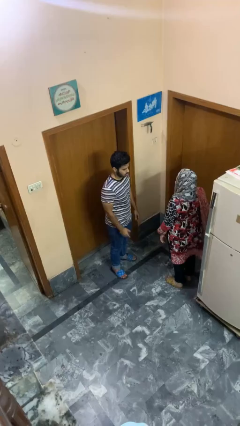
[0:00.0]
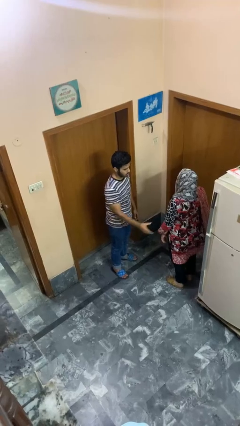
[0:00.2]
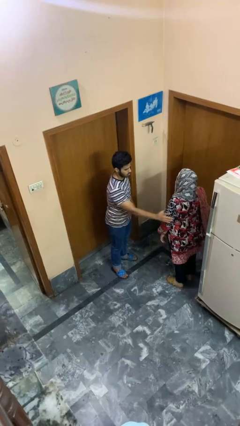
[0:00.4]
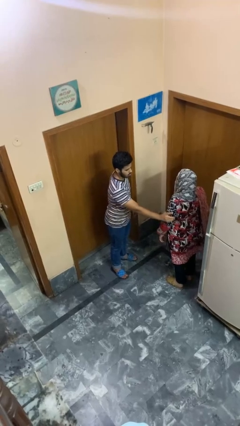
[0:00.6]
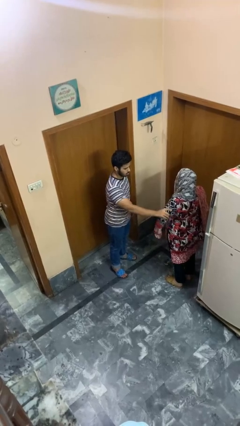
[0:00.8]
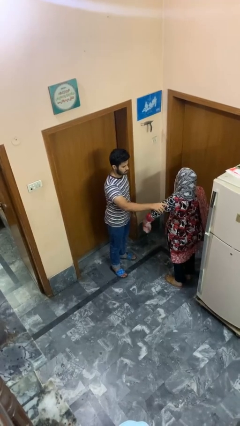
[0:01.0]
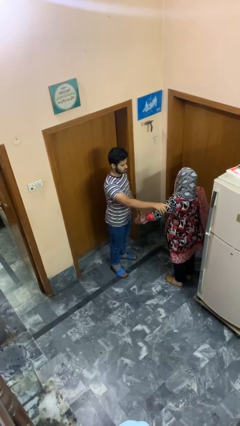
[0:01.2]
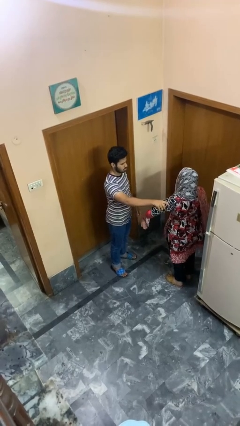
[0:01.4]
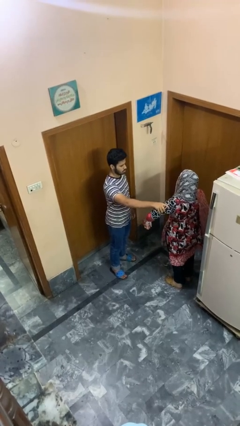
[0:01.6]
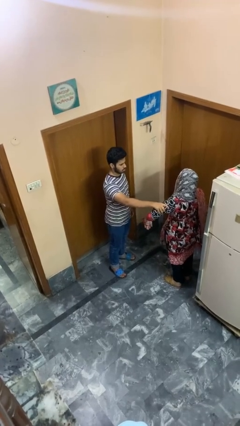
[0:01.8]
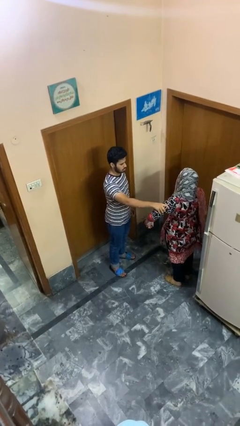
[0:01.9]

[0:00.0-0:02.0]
person grabs person by bicep

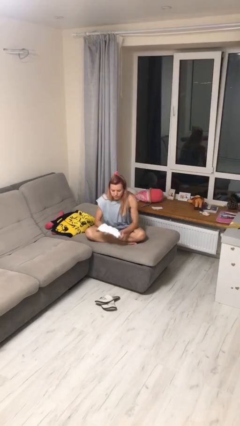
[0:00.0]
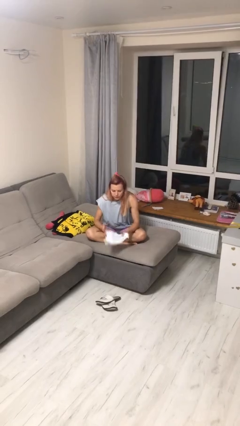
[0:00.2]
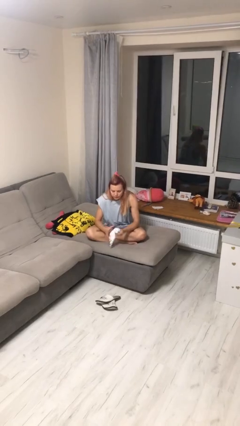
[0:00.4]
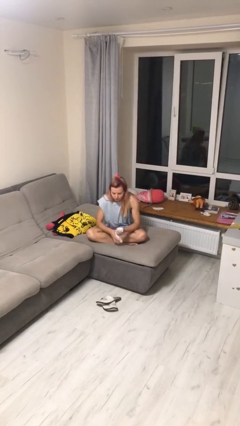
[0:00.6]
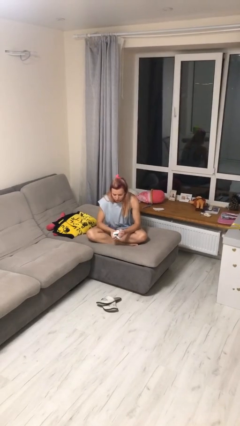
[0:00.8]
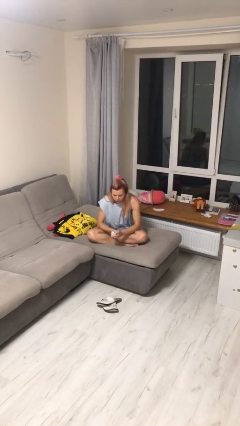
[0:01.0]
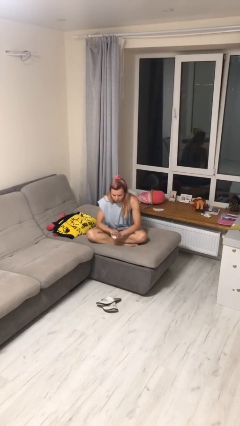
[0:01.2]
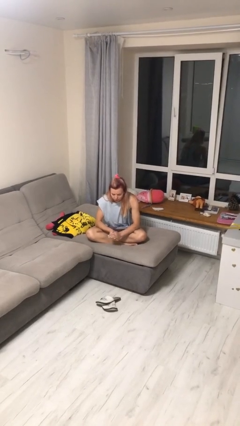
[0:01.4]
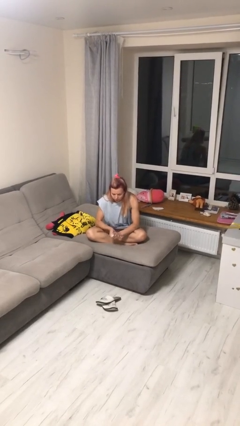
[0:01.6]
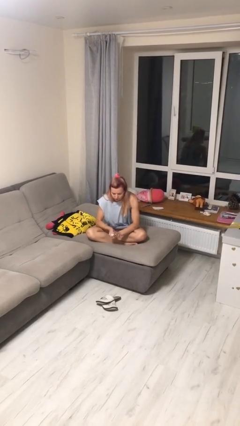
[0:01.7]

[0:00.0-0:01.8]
person crumples paper

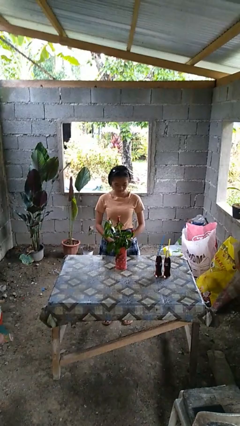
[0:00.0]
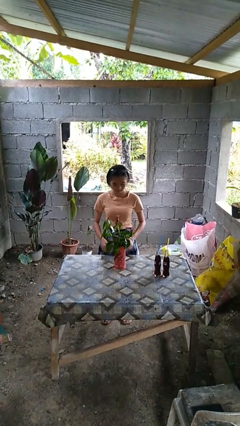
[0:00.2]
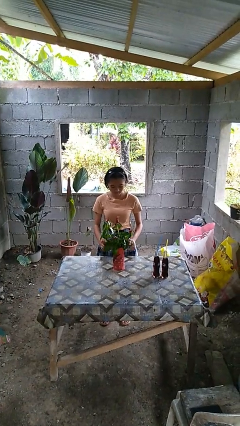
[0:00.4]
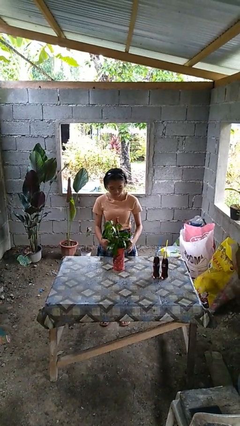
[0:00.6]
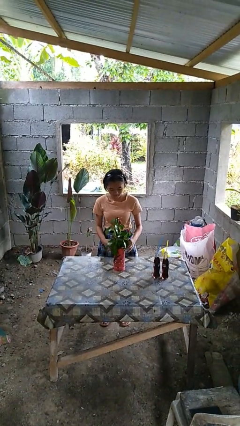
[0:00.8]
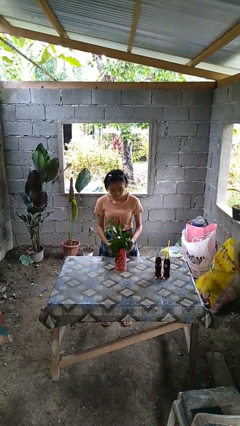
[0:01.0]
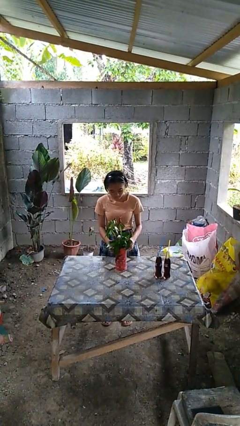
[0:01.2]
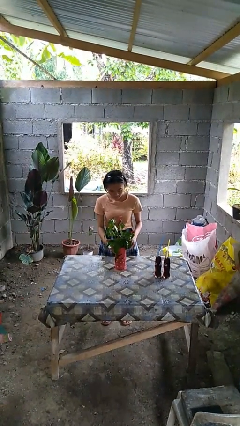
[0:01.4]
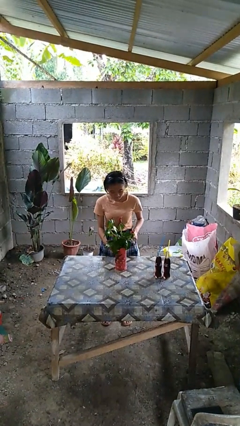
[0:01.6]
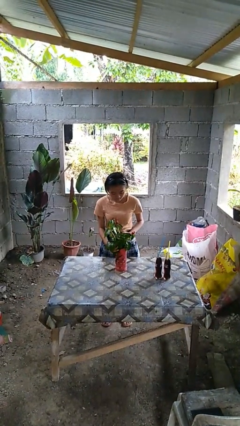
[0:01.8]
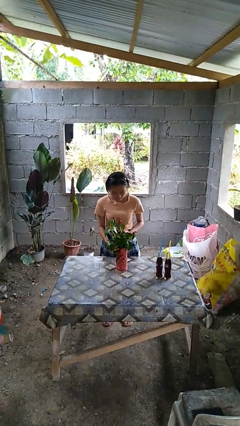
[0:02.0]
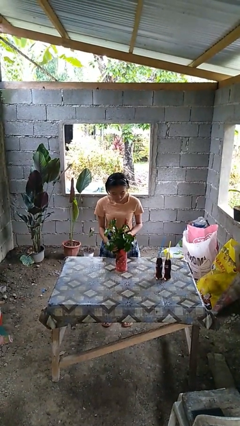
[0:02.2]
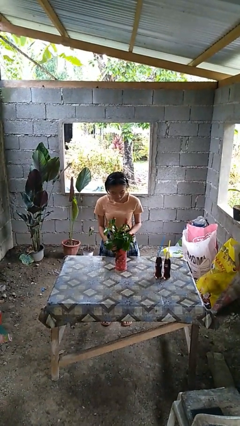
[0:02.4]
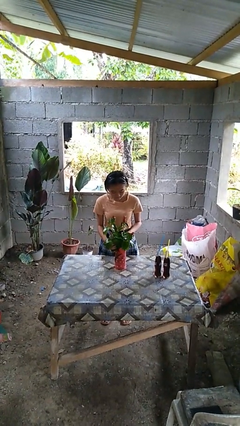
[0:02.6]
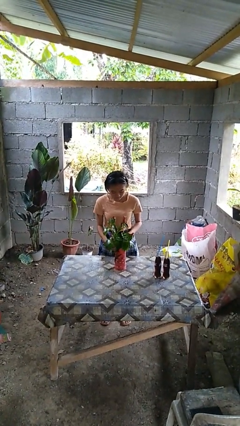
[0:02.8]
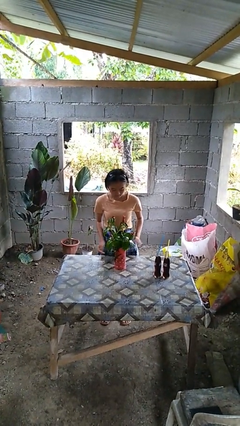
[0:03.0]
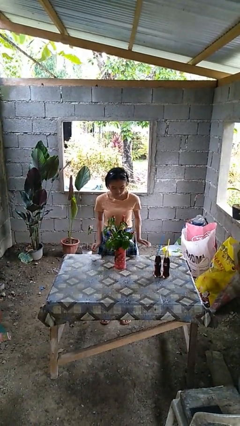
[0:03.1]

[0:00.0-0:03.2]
person arranges flowers in vase

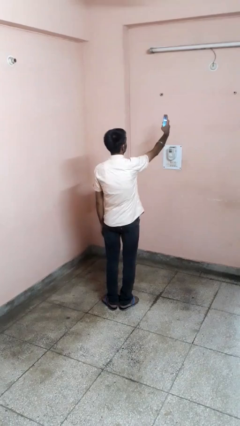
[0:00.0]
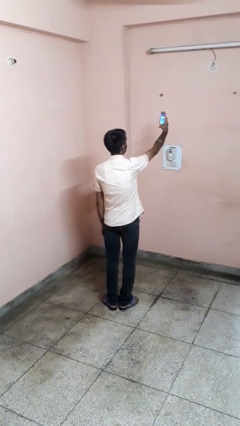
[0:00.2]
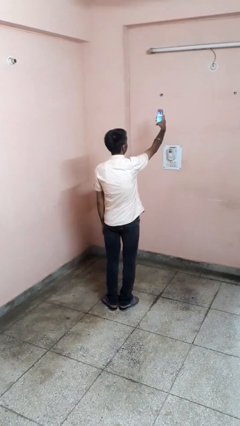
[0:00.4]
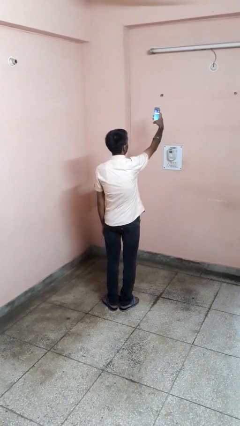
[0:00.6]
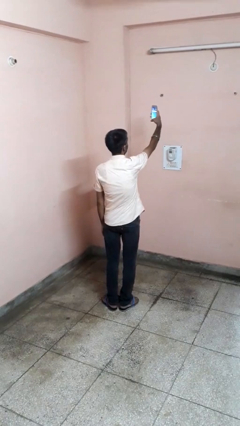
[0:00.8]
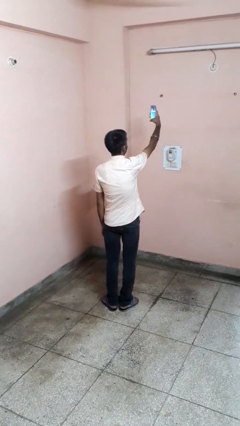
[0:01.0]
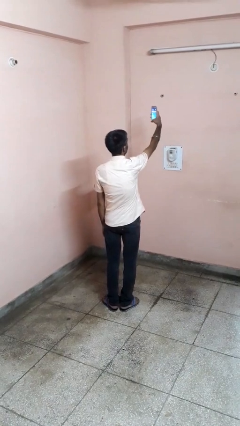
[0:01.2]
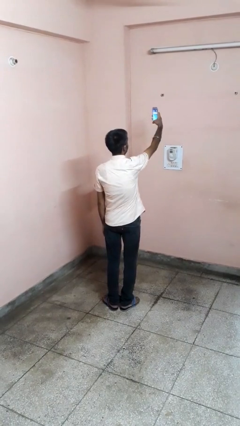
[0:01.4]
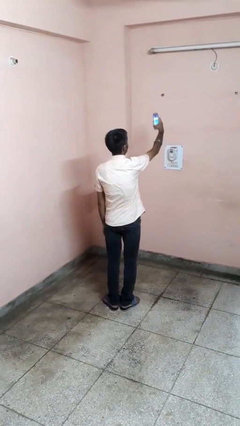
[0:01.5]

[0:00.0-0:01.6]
person takes selfie

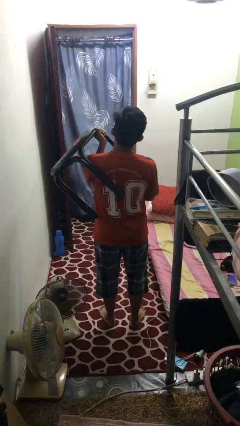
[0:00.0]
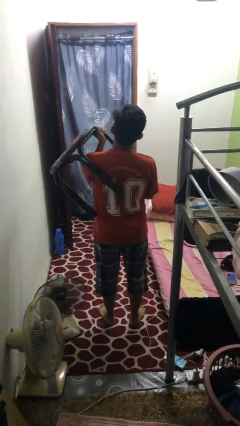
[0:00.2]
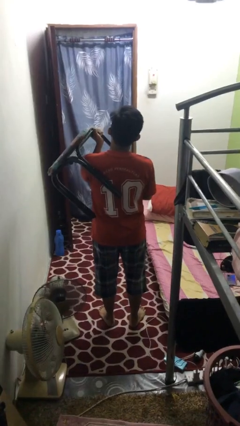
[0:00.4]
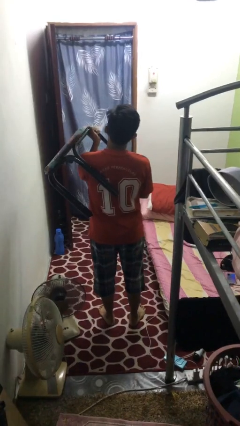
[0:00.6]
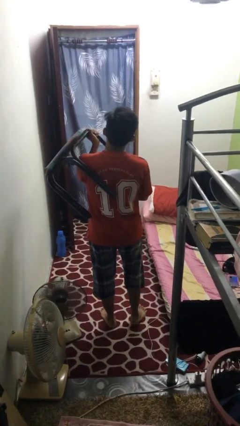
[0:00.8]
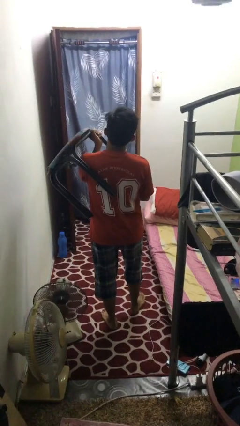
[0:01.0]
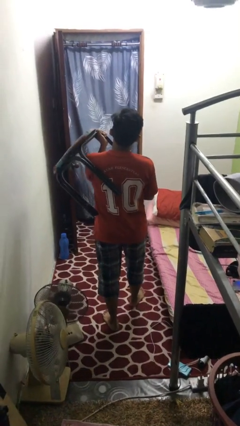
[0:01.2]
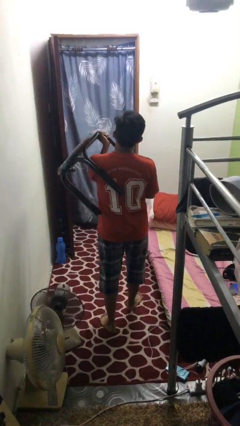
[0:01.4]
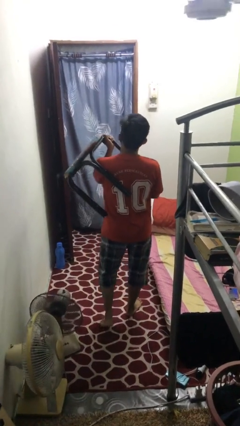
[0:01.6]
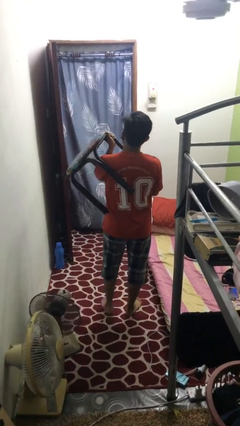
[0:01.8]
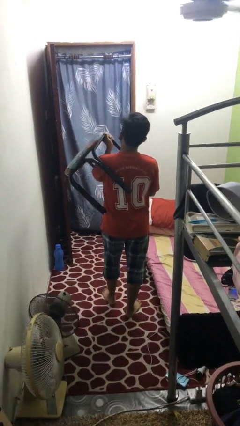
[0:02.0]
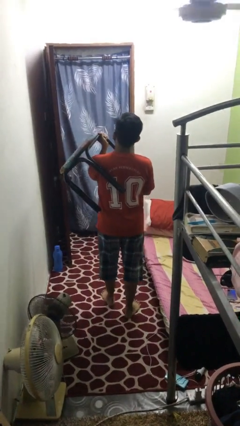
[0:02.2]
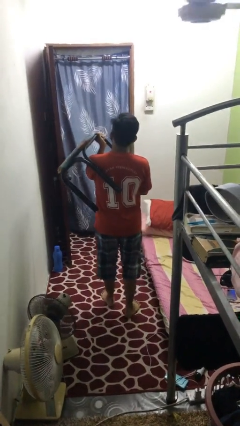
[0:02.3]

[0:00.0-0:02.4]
person carries furniture

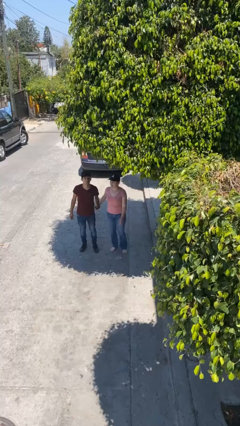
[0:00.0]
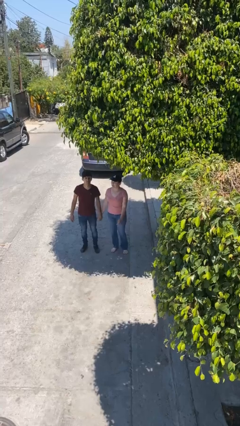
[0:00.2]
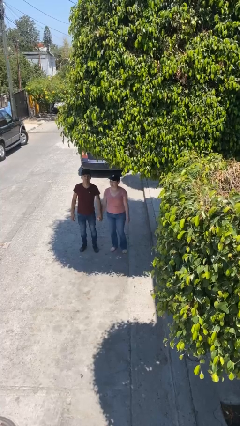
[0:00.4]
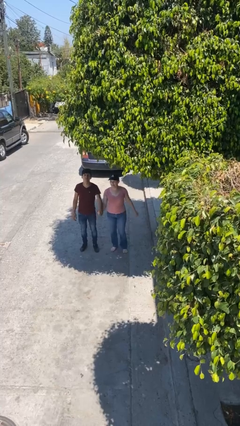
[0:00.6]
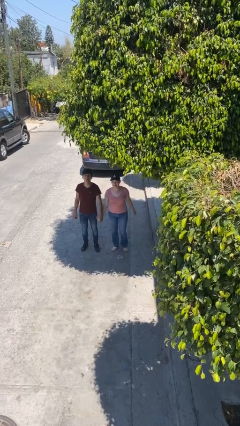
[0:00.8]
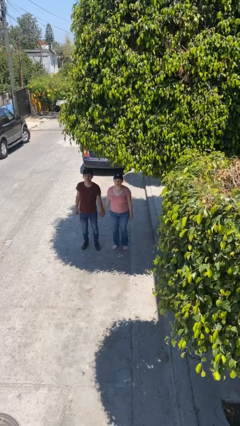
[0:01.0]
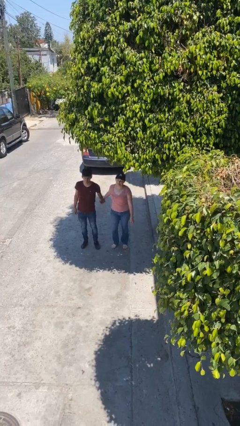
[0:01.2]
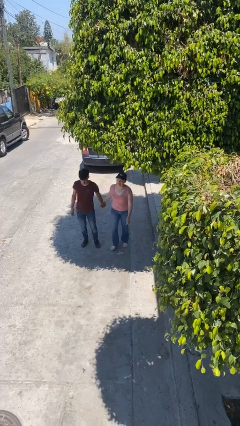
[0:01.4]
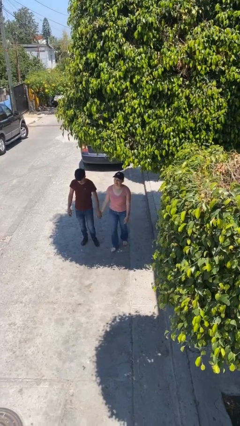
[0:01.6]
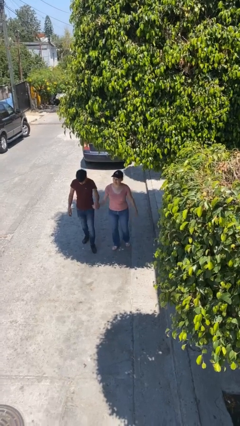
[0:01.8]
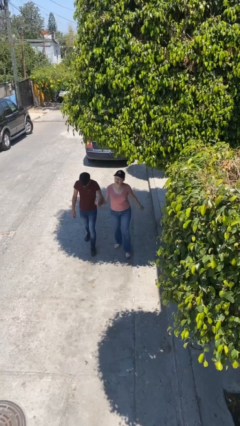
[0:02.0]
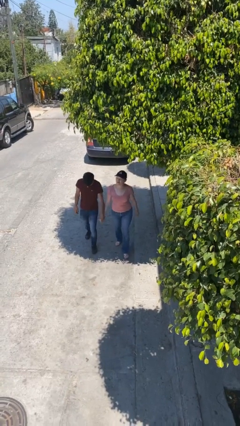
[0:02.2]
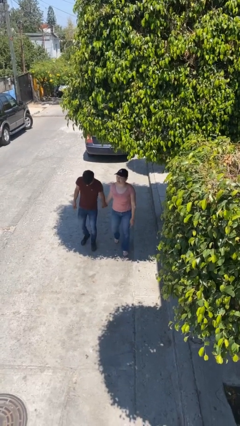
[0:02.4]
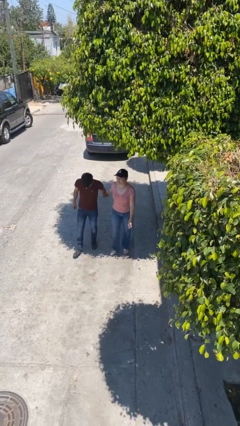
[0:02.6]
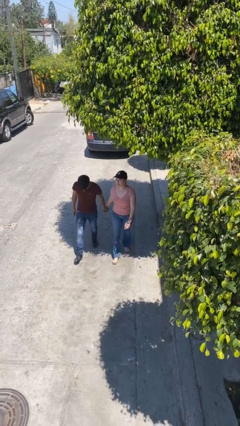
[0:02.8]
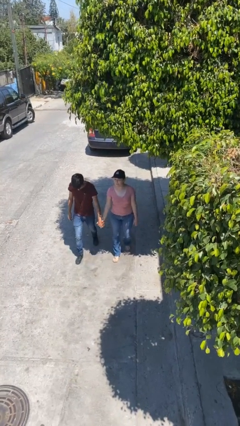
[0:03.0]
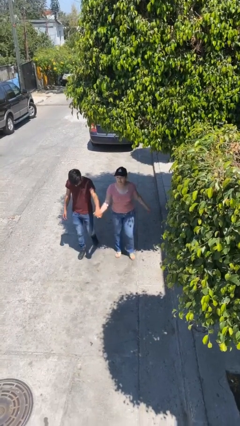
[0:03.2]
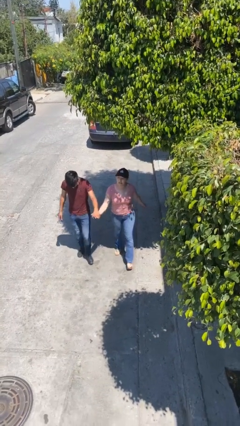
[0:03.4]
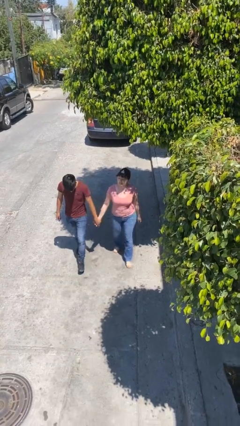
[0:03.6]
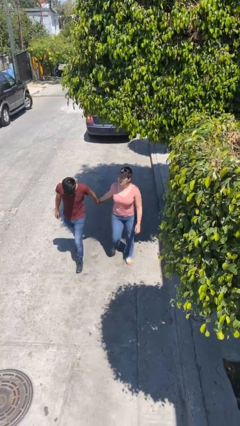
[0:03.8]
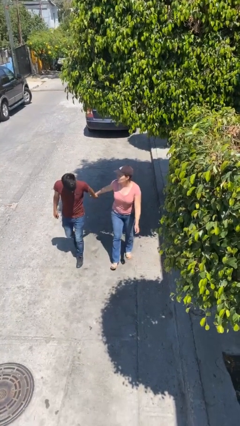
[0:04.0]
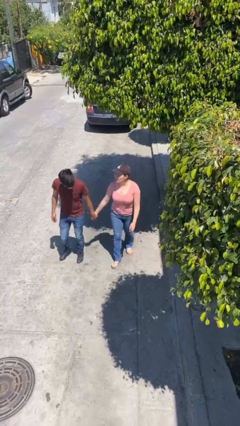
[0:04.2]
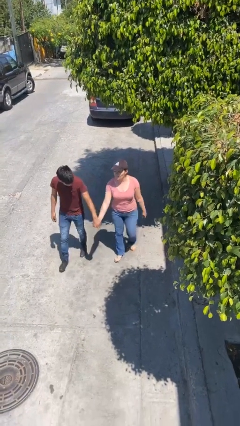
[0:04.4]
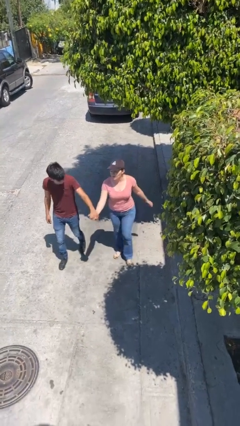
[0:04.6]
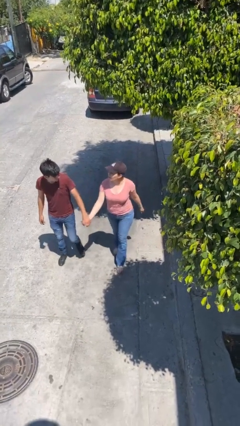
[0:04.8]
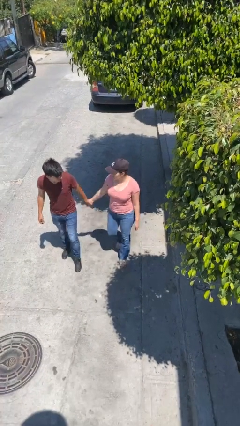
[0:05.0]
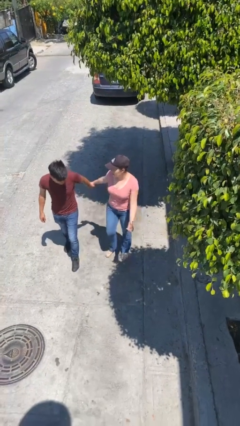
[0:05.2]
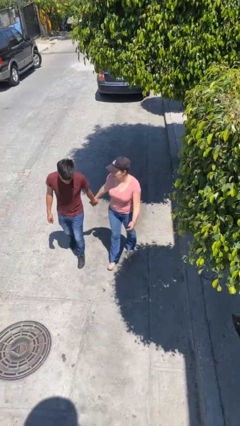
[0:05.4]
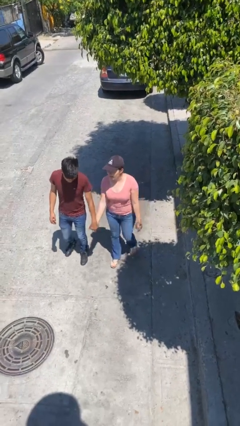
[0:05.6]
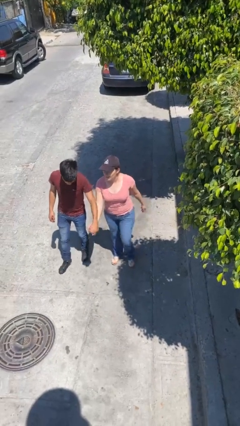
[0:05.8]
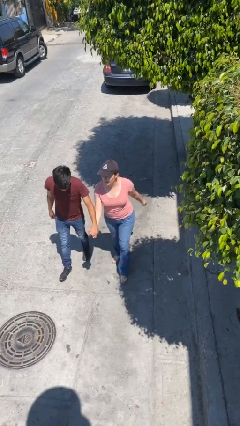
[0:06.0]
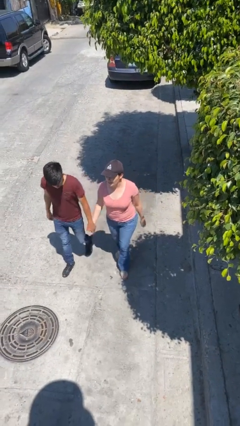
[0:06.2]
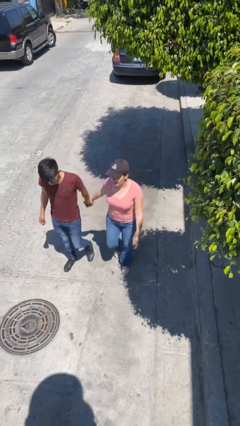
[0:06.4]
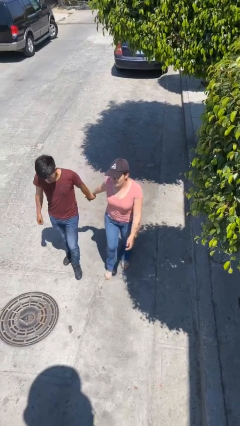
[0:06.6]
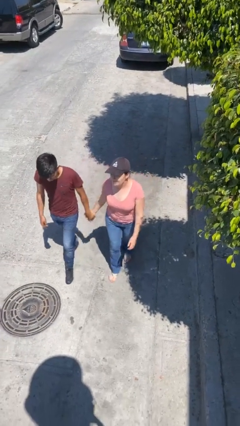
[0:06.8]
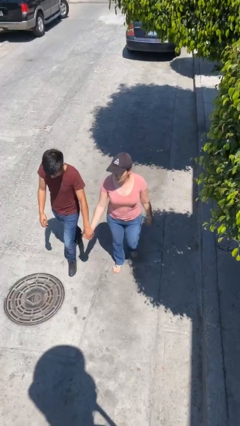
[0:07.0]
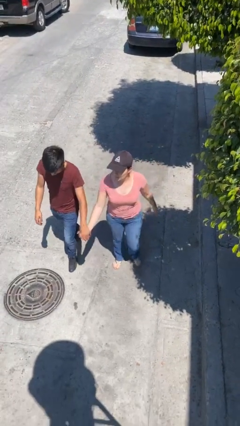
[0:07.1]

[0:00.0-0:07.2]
person holds hand
